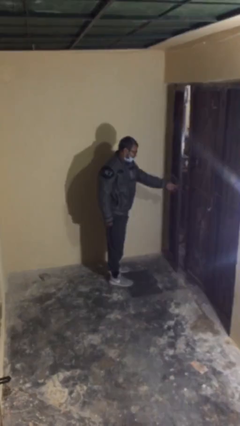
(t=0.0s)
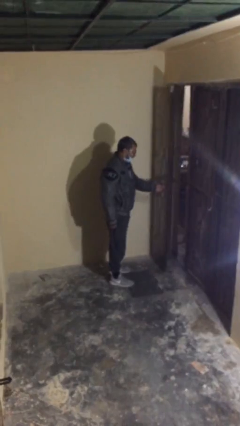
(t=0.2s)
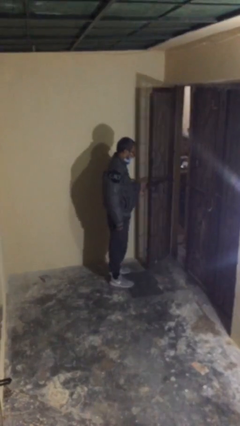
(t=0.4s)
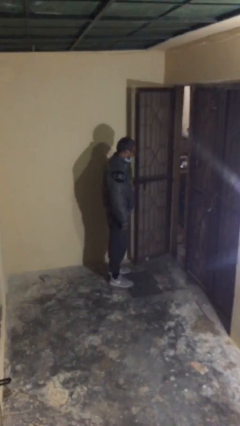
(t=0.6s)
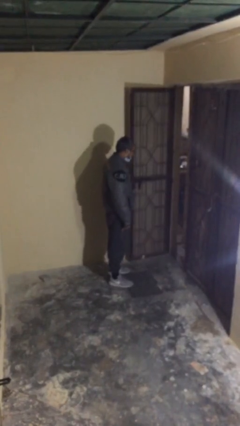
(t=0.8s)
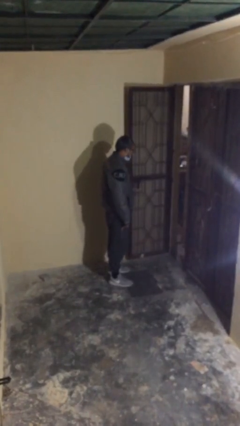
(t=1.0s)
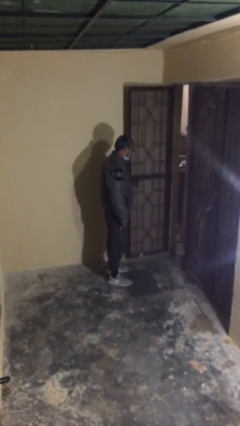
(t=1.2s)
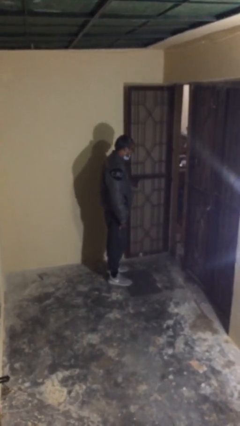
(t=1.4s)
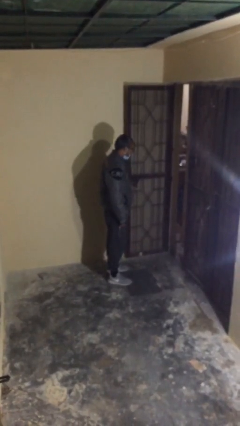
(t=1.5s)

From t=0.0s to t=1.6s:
person opens facility door

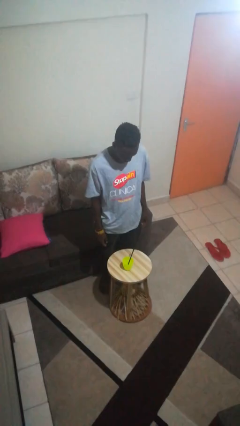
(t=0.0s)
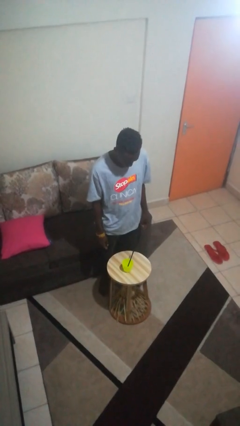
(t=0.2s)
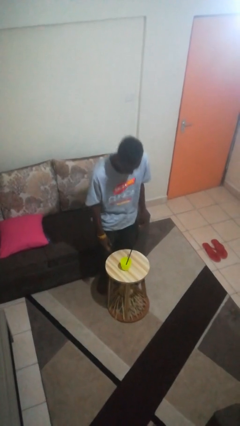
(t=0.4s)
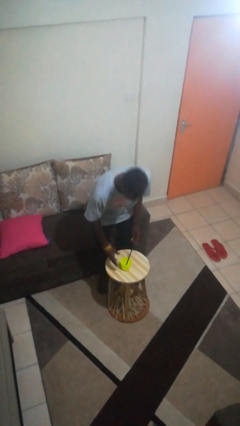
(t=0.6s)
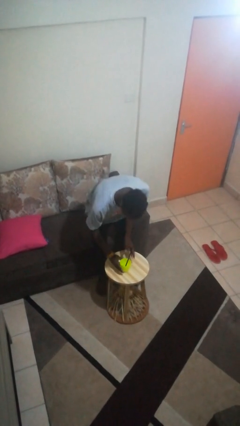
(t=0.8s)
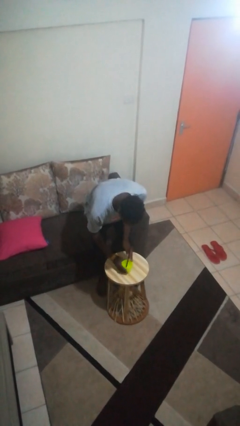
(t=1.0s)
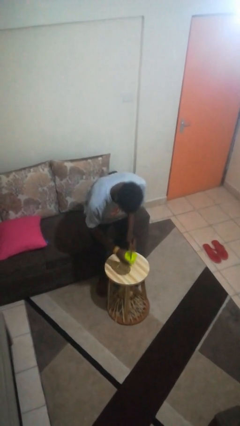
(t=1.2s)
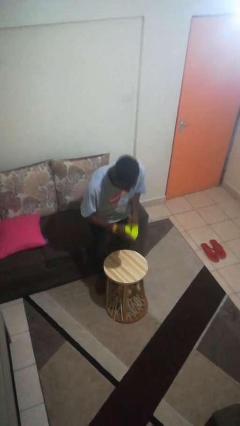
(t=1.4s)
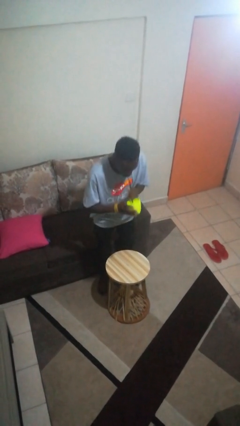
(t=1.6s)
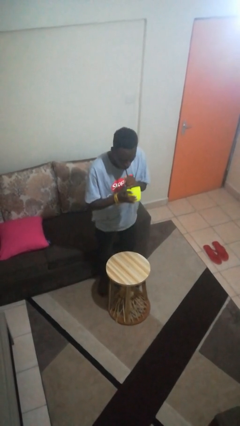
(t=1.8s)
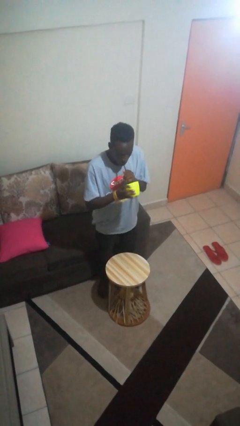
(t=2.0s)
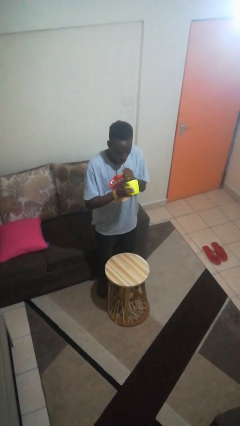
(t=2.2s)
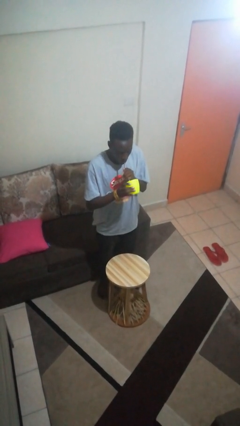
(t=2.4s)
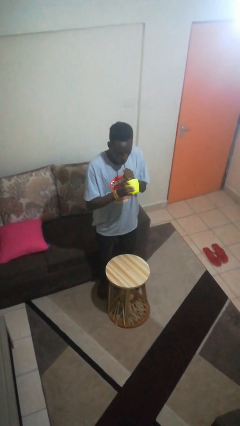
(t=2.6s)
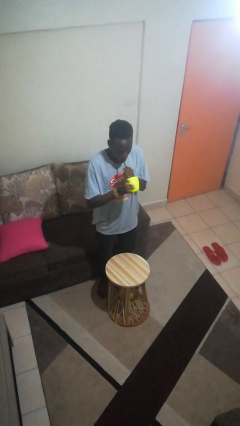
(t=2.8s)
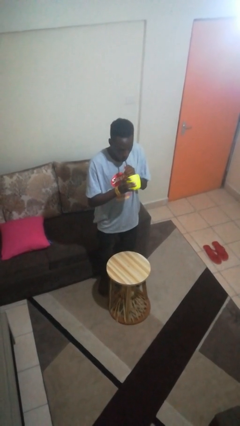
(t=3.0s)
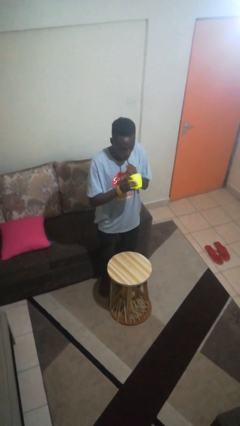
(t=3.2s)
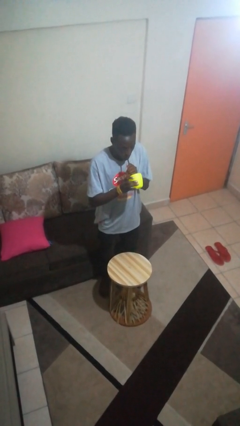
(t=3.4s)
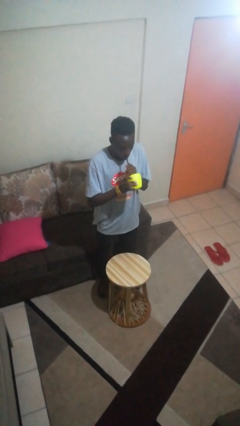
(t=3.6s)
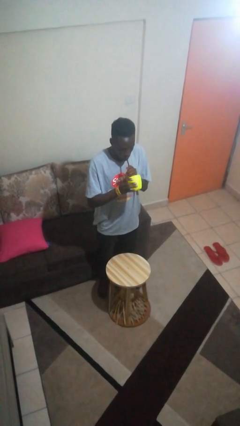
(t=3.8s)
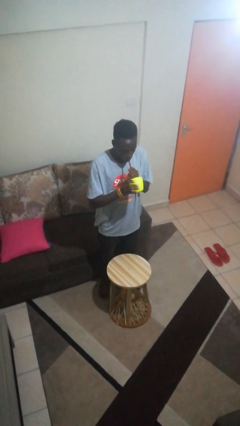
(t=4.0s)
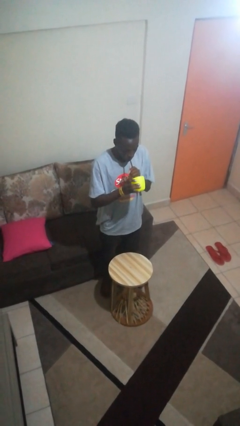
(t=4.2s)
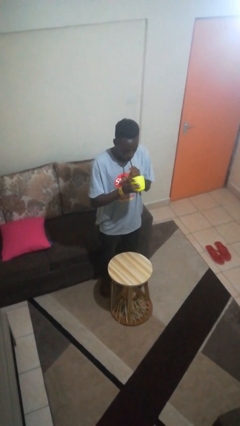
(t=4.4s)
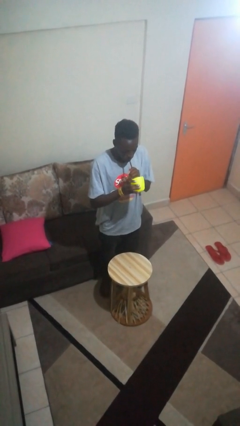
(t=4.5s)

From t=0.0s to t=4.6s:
person drinks from straw

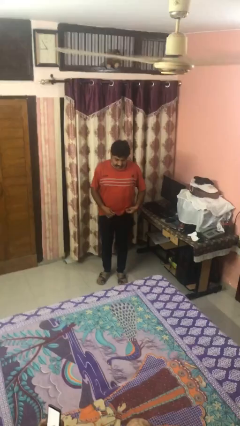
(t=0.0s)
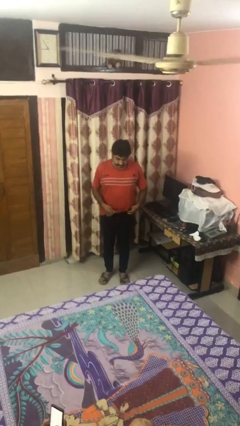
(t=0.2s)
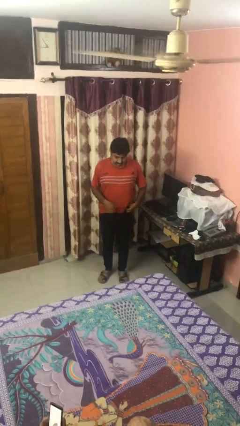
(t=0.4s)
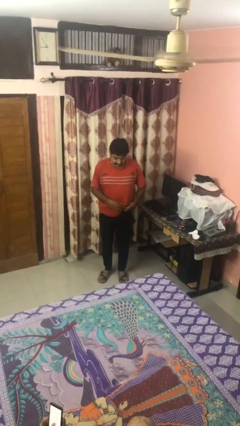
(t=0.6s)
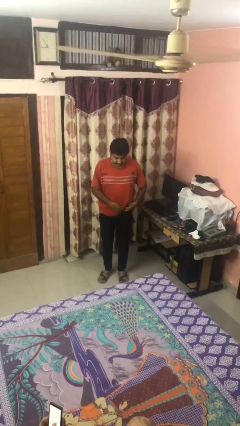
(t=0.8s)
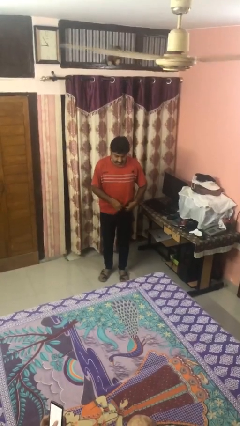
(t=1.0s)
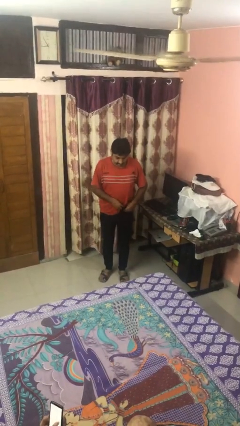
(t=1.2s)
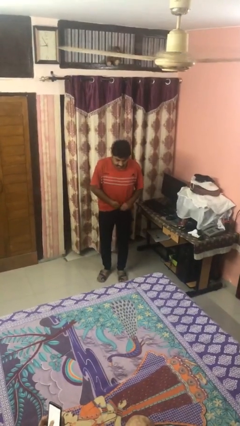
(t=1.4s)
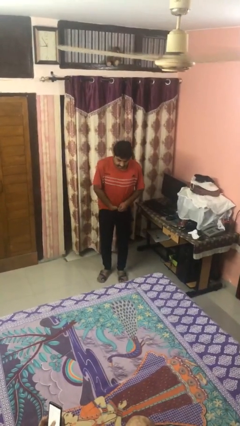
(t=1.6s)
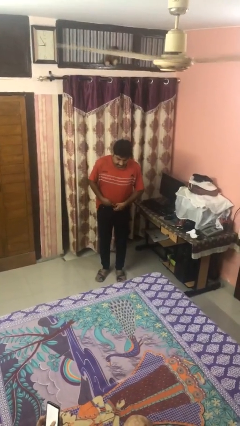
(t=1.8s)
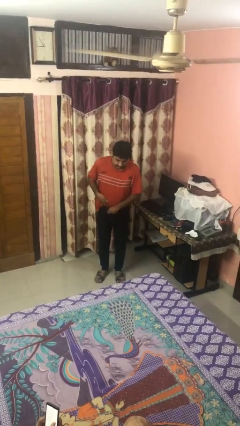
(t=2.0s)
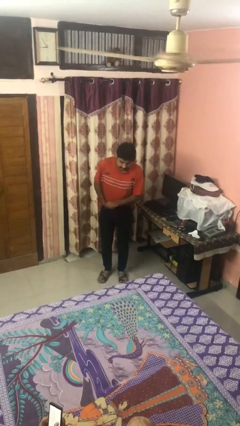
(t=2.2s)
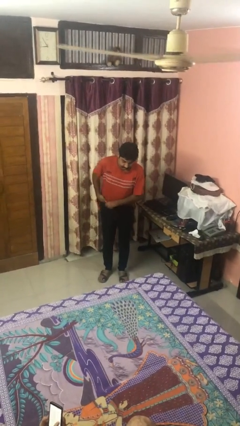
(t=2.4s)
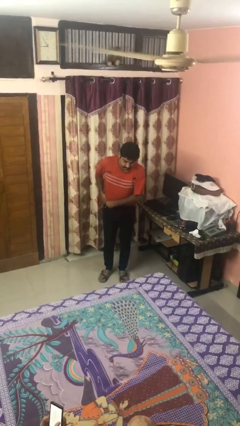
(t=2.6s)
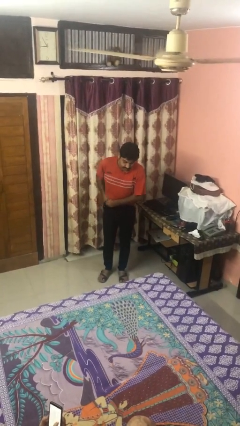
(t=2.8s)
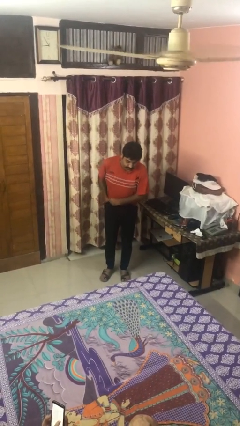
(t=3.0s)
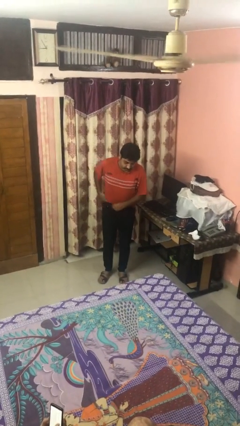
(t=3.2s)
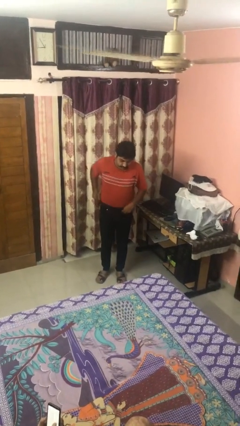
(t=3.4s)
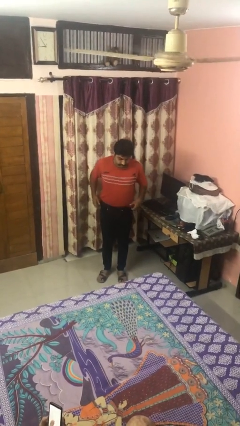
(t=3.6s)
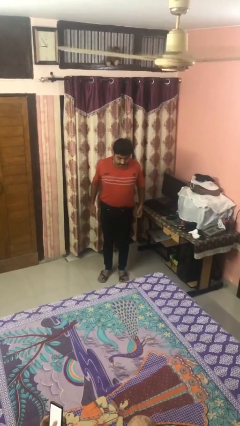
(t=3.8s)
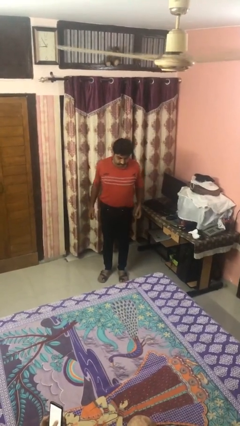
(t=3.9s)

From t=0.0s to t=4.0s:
person tucks in shirt

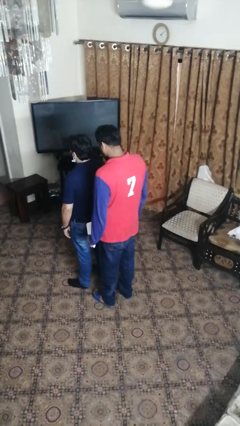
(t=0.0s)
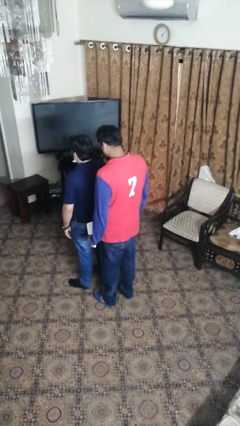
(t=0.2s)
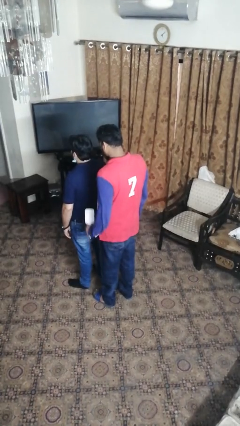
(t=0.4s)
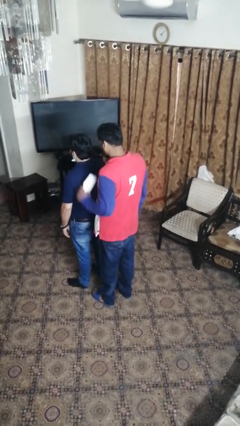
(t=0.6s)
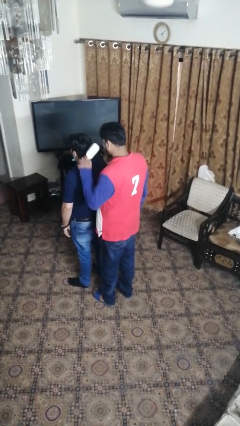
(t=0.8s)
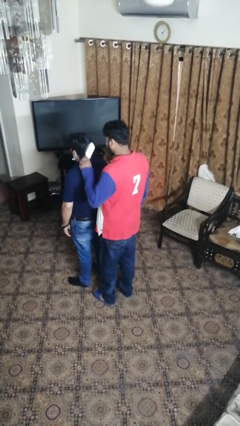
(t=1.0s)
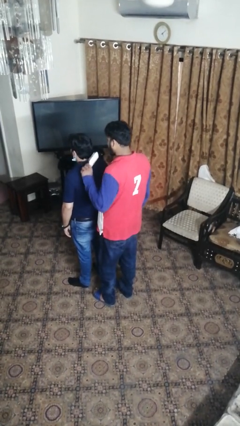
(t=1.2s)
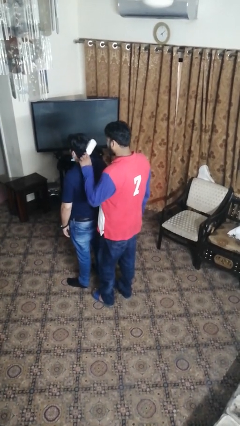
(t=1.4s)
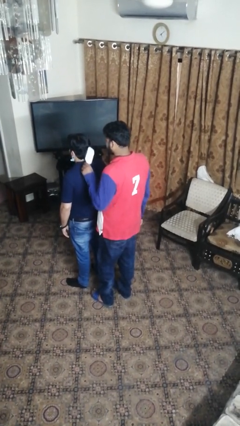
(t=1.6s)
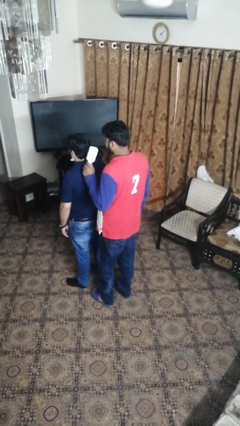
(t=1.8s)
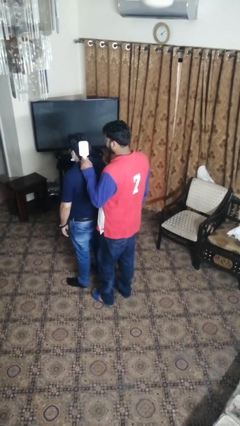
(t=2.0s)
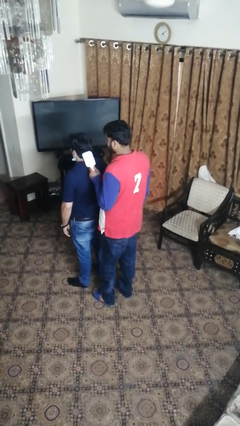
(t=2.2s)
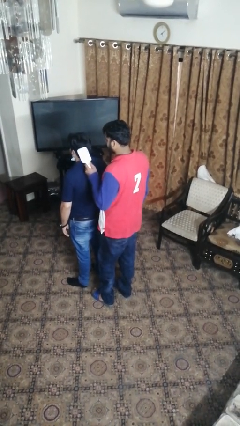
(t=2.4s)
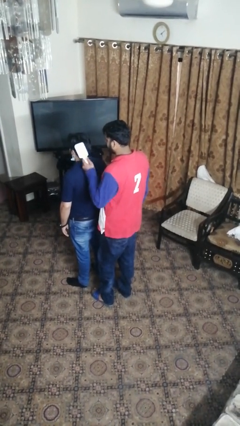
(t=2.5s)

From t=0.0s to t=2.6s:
person brushes hair of person

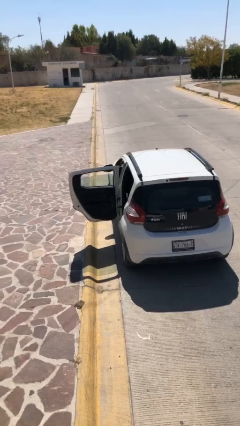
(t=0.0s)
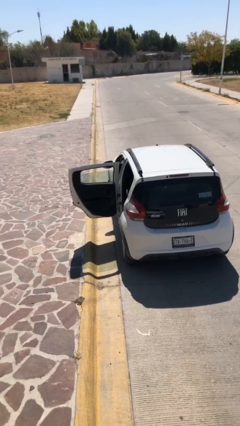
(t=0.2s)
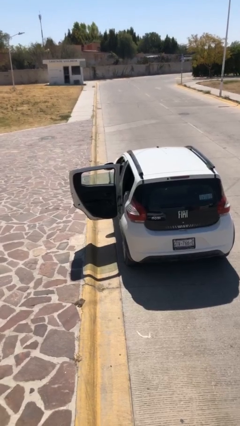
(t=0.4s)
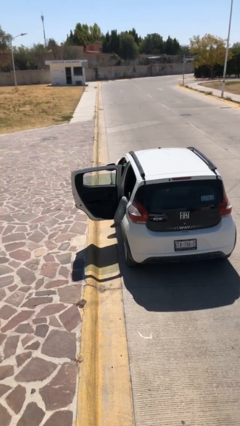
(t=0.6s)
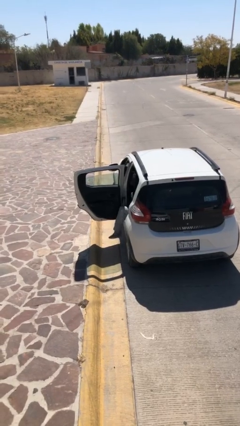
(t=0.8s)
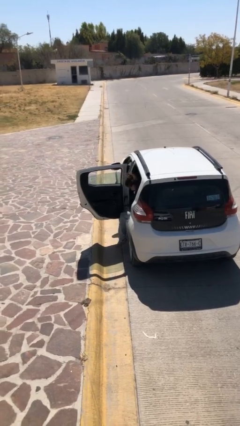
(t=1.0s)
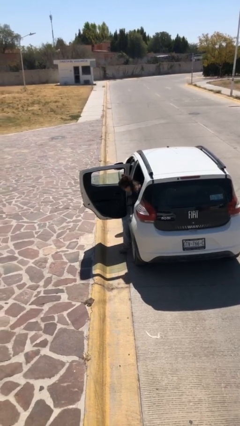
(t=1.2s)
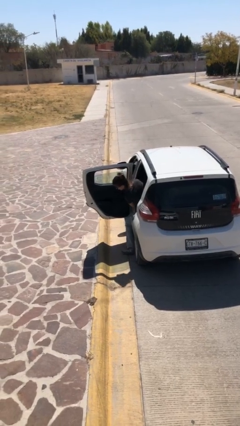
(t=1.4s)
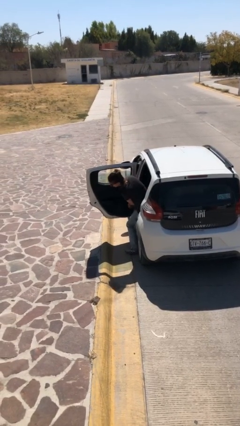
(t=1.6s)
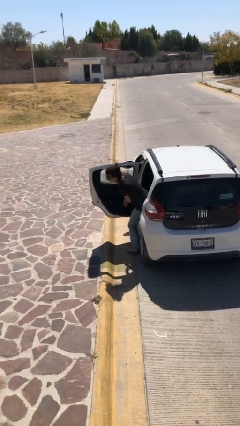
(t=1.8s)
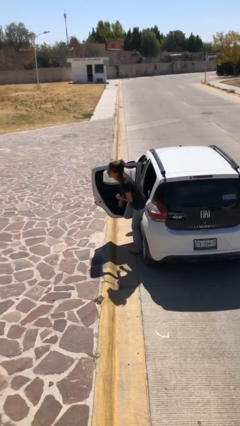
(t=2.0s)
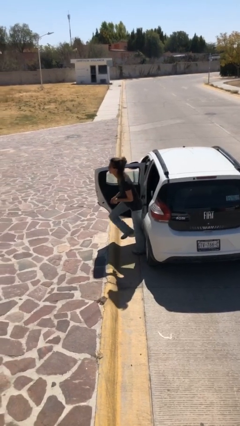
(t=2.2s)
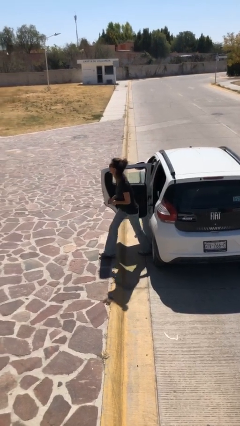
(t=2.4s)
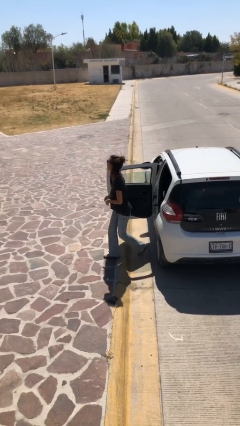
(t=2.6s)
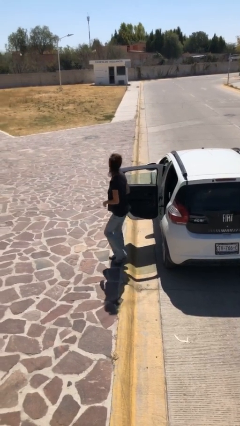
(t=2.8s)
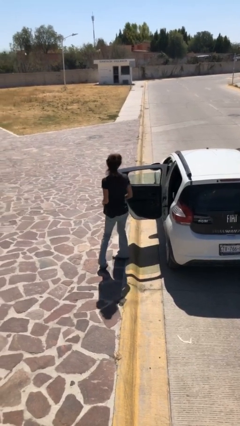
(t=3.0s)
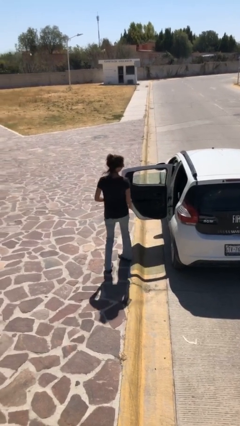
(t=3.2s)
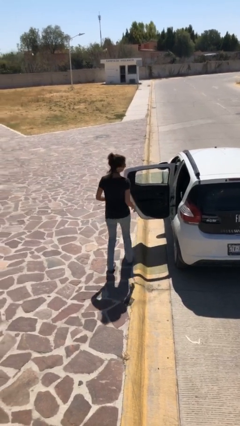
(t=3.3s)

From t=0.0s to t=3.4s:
person exits car

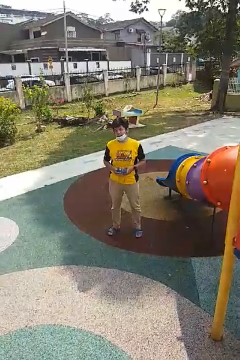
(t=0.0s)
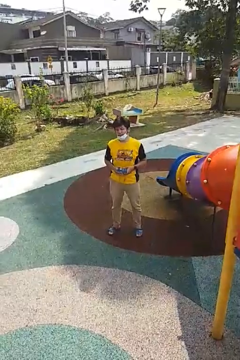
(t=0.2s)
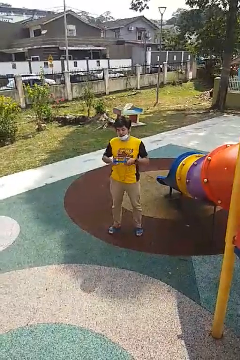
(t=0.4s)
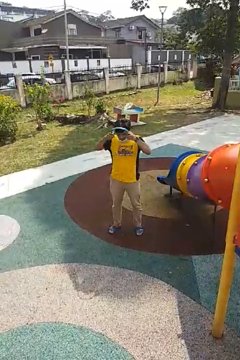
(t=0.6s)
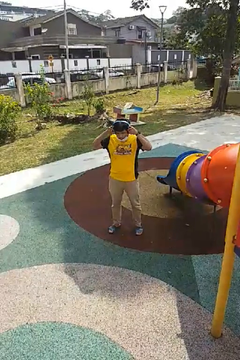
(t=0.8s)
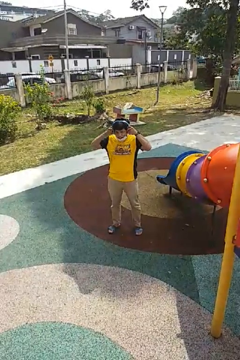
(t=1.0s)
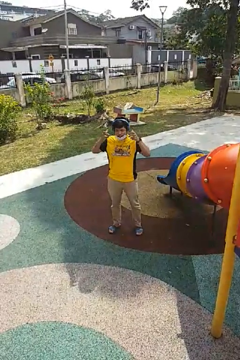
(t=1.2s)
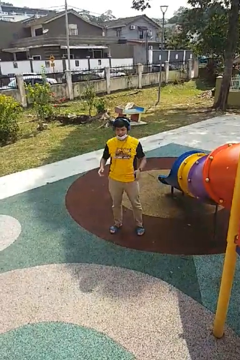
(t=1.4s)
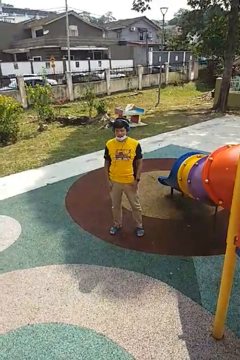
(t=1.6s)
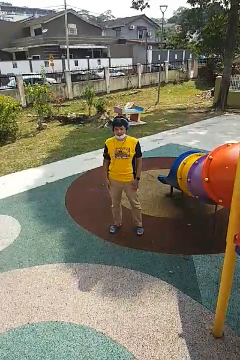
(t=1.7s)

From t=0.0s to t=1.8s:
person puts on headphones
